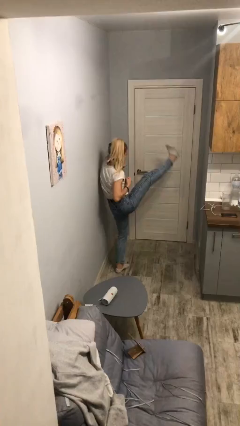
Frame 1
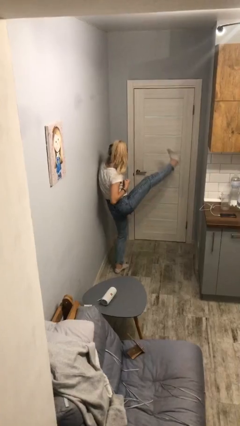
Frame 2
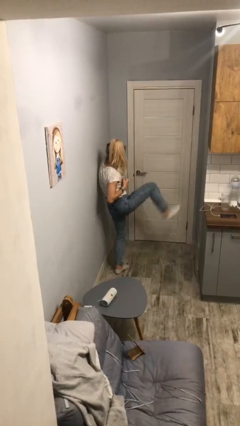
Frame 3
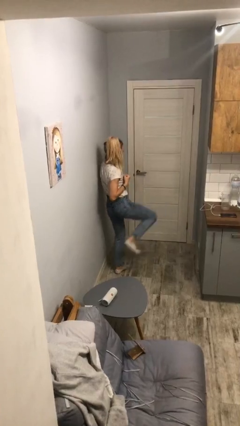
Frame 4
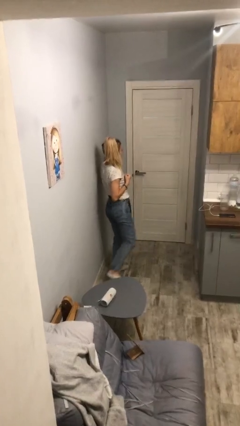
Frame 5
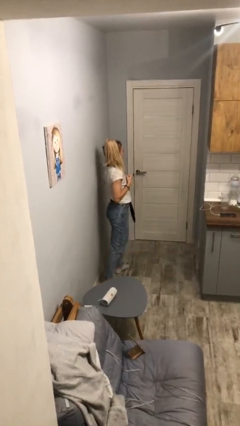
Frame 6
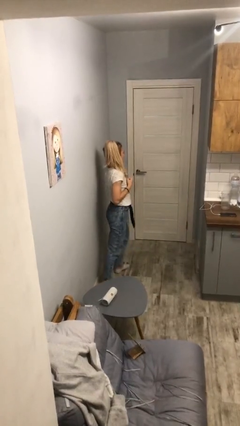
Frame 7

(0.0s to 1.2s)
person karate kicks

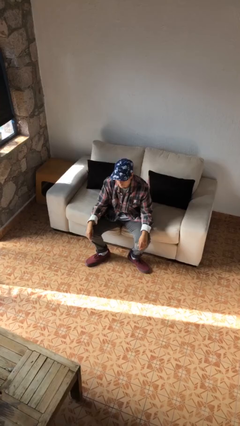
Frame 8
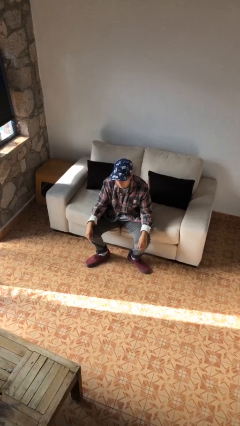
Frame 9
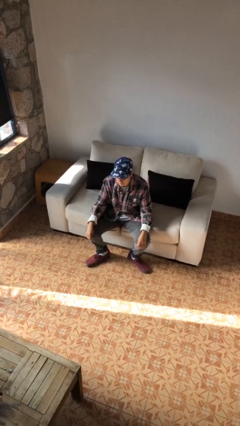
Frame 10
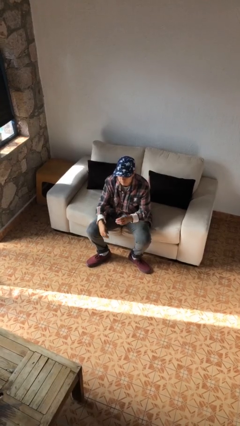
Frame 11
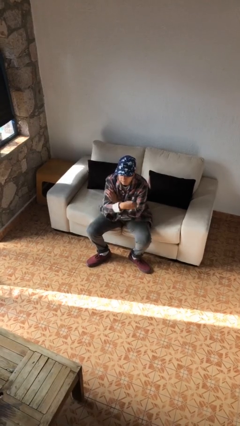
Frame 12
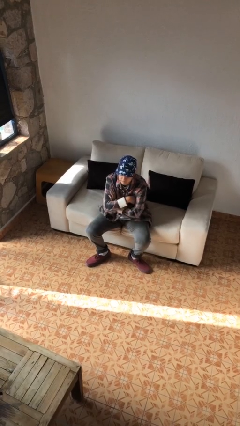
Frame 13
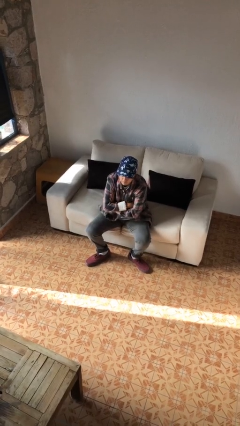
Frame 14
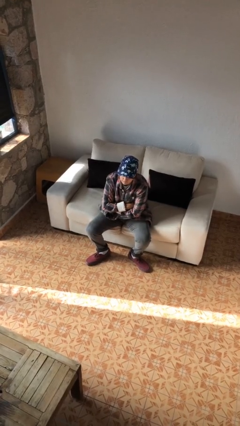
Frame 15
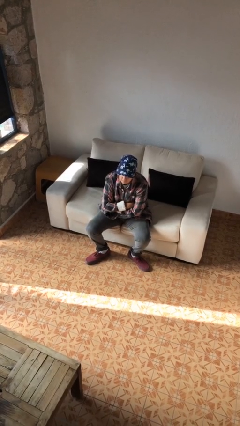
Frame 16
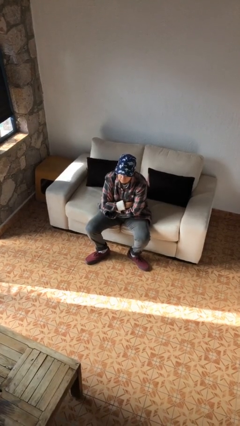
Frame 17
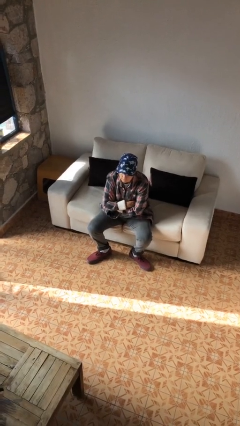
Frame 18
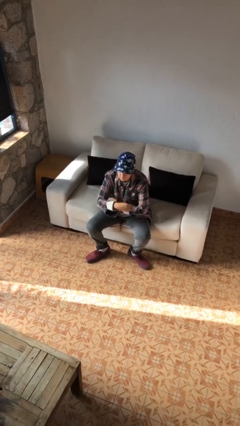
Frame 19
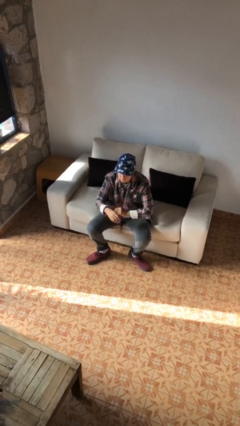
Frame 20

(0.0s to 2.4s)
person crosses arms

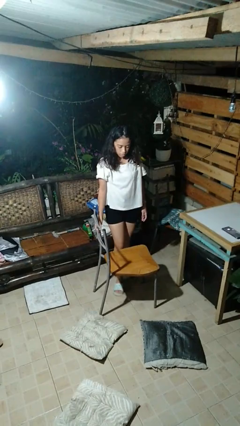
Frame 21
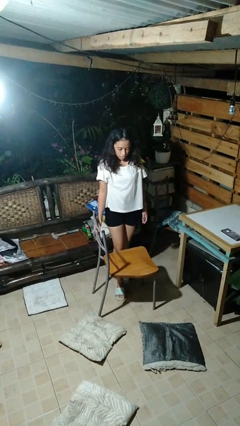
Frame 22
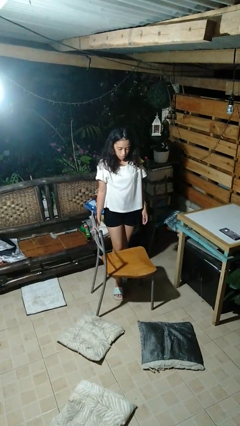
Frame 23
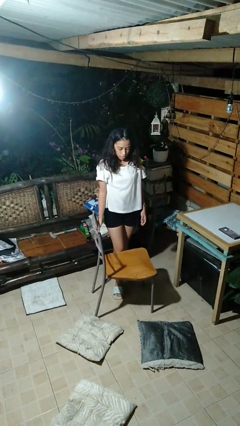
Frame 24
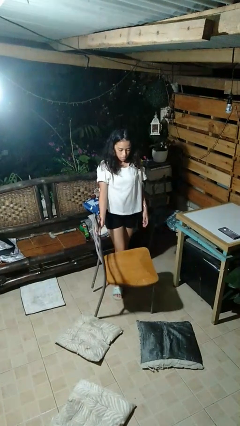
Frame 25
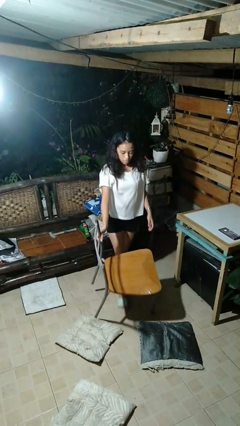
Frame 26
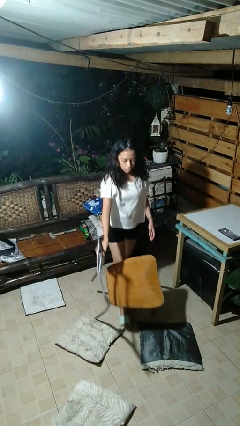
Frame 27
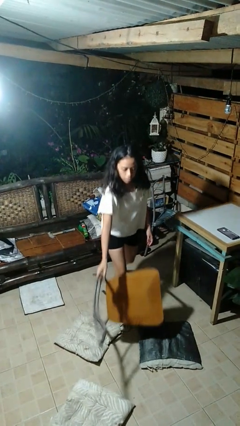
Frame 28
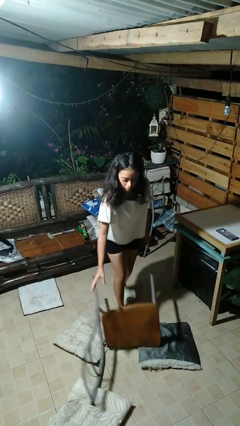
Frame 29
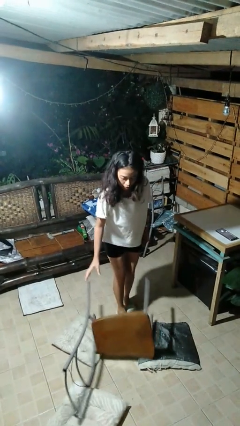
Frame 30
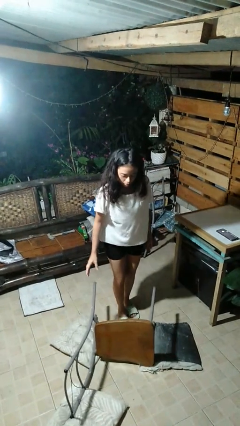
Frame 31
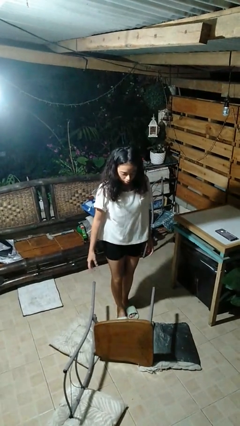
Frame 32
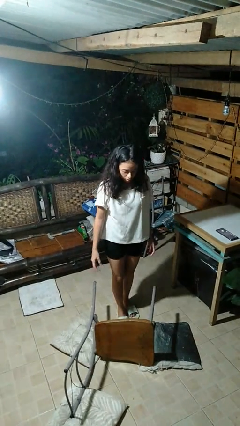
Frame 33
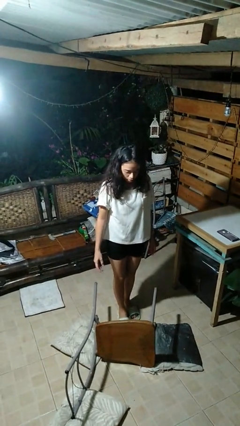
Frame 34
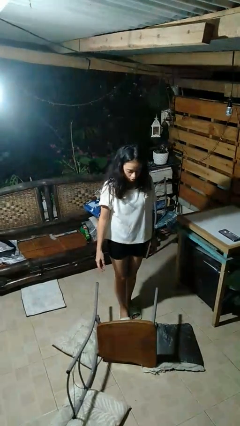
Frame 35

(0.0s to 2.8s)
person knocks over furniture

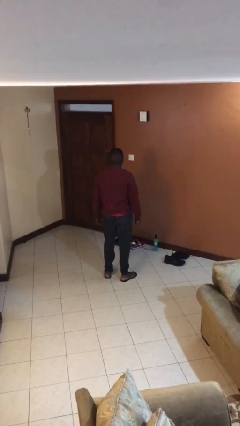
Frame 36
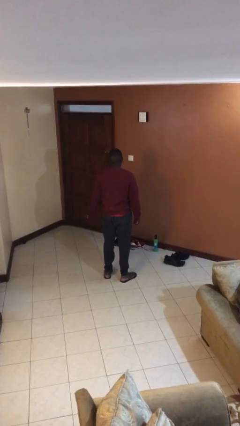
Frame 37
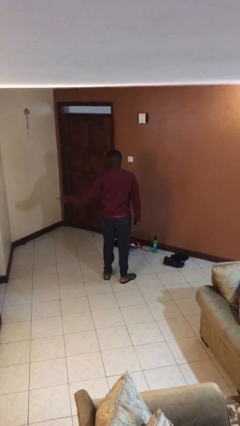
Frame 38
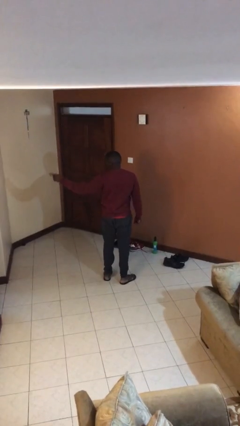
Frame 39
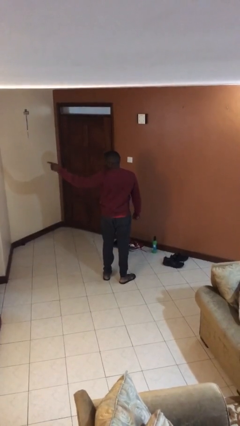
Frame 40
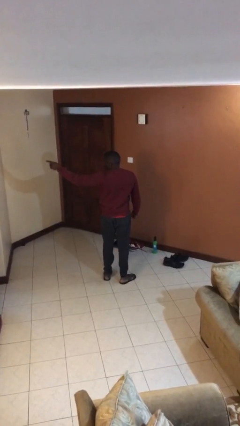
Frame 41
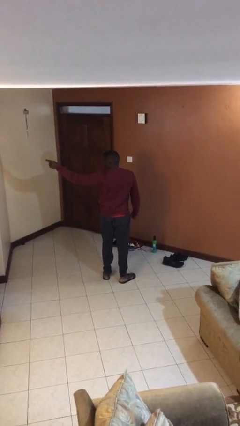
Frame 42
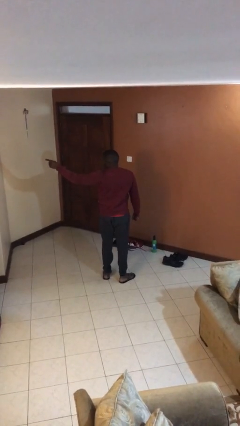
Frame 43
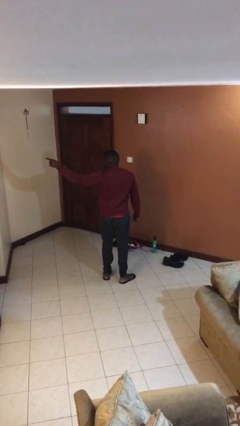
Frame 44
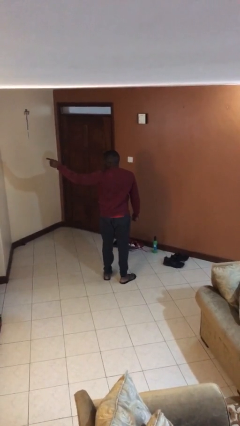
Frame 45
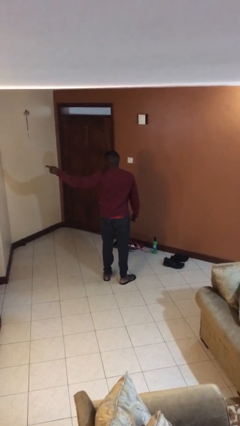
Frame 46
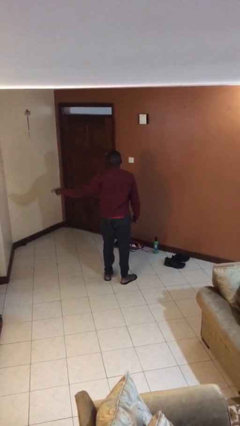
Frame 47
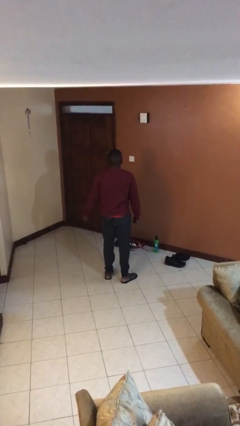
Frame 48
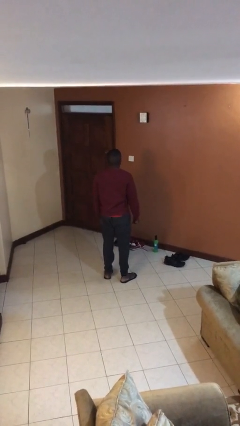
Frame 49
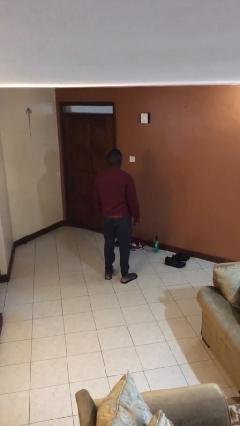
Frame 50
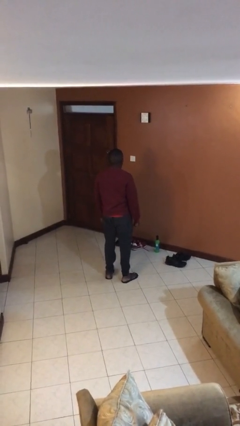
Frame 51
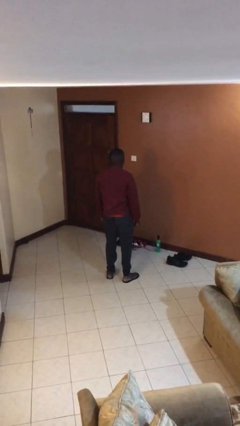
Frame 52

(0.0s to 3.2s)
person points at person

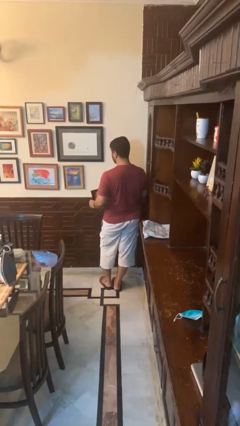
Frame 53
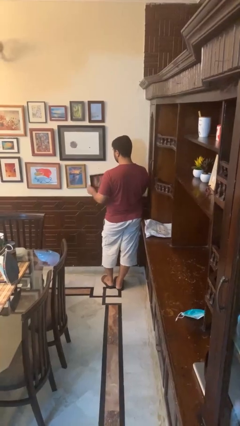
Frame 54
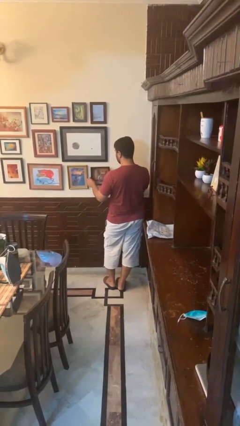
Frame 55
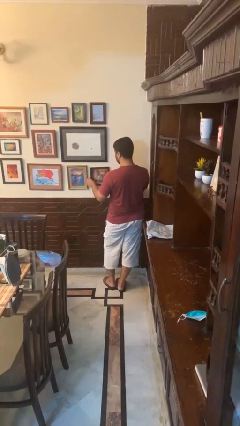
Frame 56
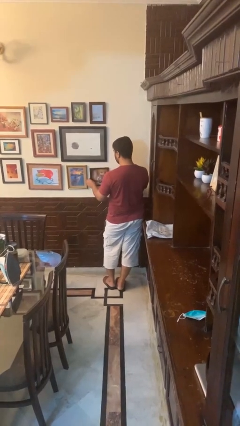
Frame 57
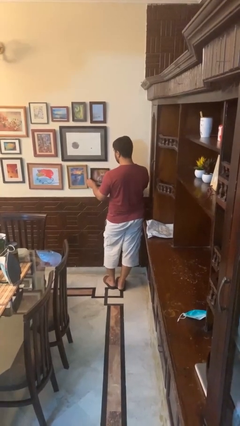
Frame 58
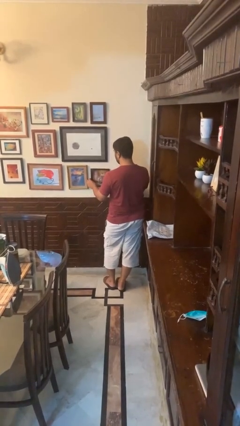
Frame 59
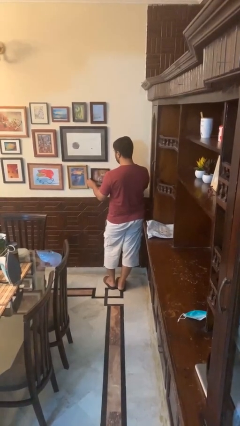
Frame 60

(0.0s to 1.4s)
person puts up picture frame

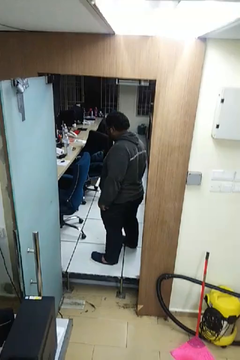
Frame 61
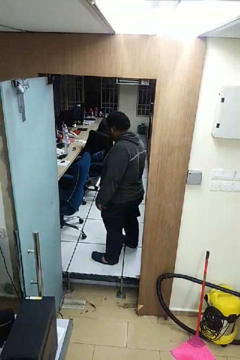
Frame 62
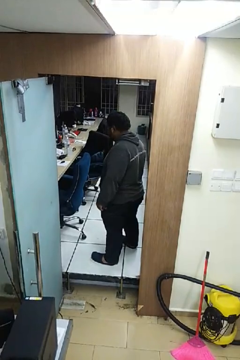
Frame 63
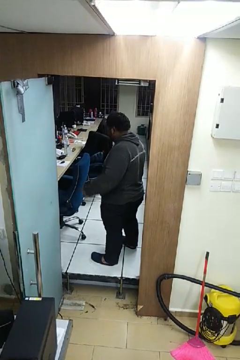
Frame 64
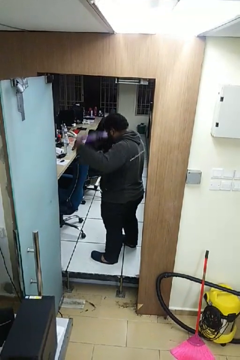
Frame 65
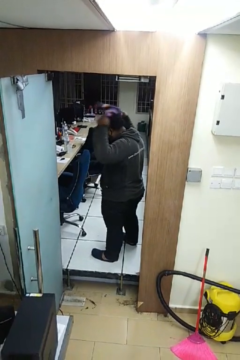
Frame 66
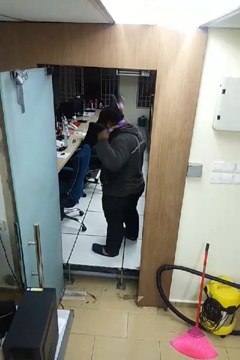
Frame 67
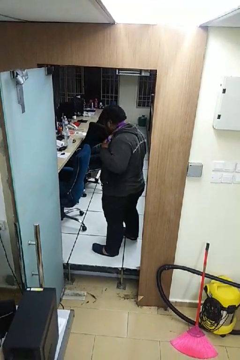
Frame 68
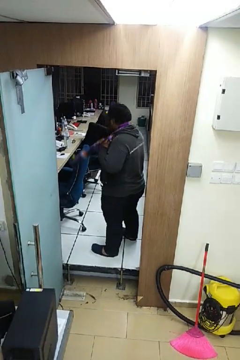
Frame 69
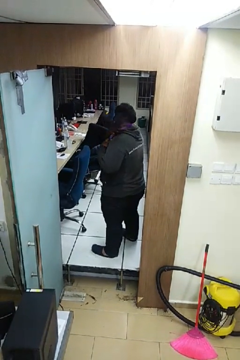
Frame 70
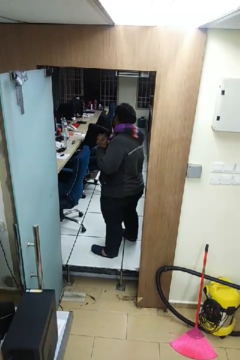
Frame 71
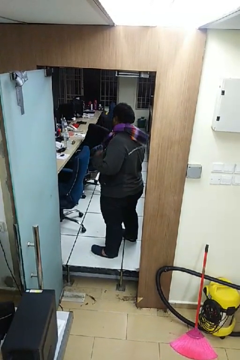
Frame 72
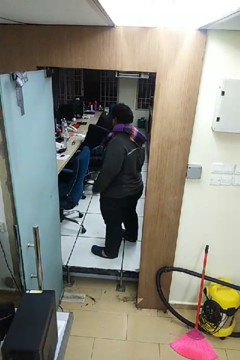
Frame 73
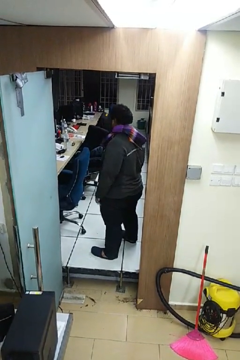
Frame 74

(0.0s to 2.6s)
person puts on scarf

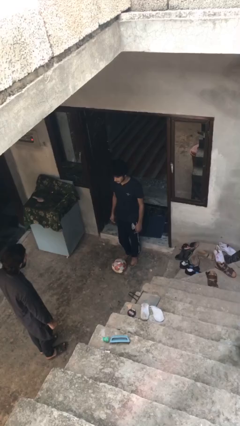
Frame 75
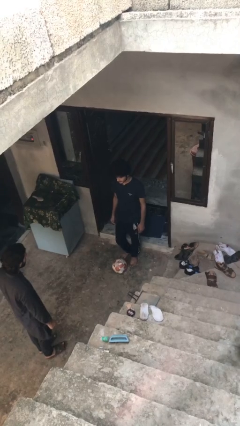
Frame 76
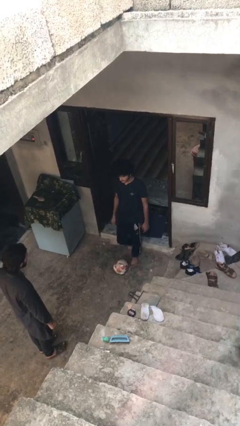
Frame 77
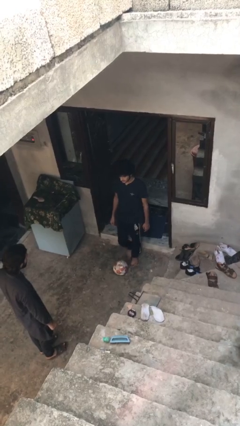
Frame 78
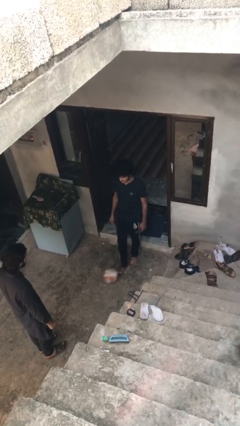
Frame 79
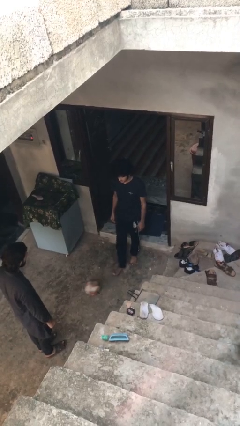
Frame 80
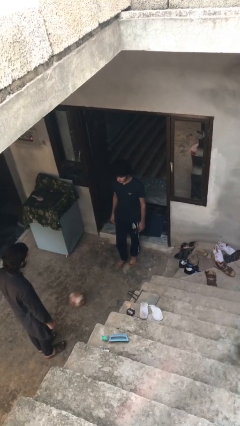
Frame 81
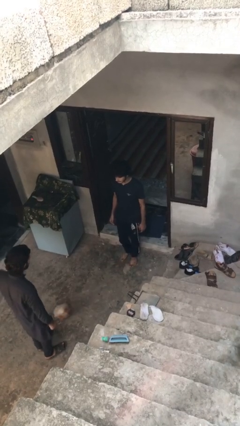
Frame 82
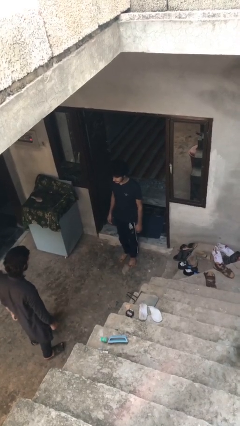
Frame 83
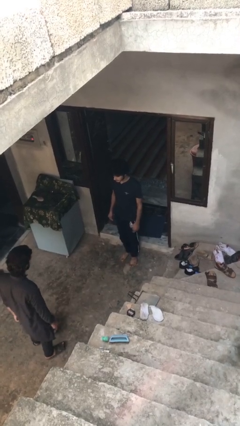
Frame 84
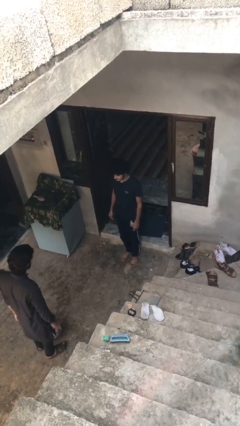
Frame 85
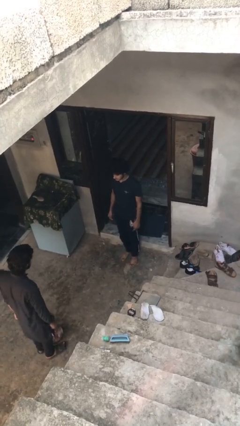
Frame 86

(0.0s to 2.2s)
person kicks object to person

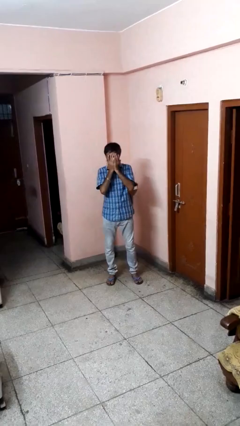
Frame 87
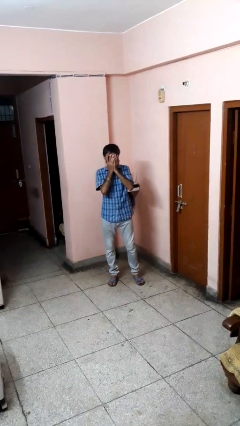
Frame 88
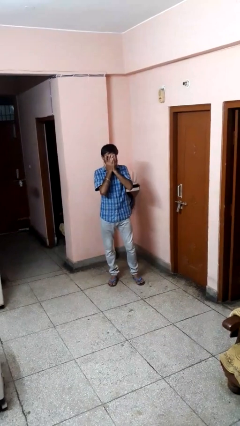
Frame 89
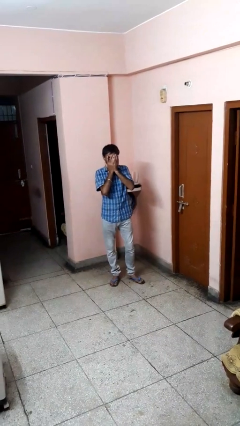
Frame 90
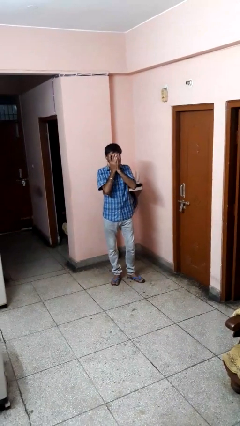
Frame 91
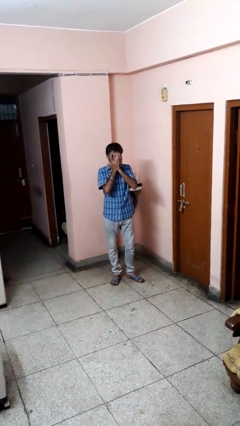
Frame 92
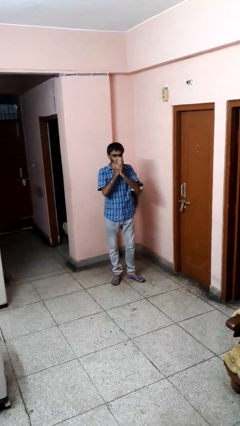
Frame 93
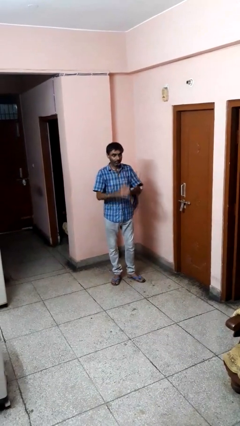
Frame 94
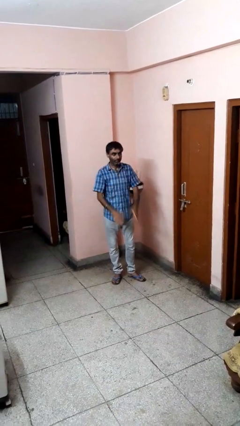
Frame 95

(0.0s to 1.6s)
person covers face with hands
